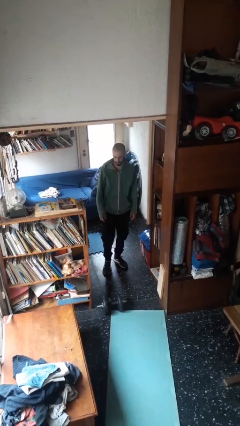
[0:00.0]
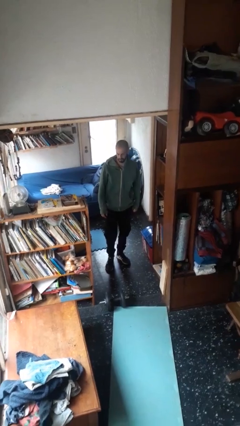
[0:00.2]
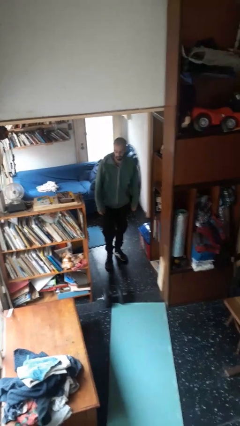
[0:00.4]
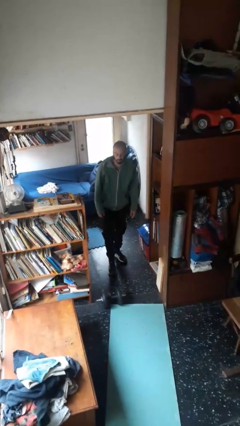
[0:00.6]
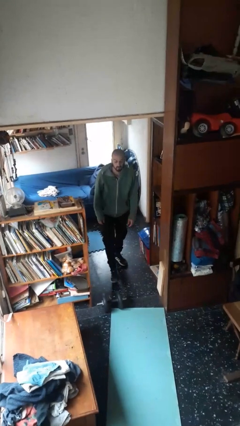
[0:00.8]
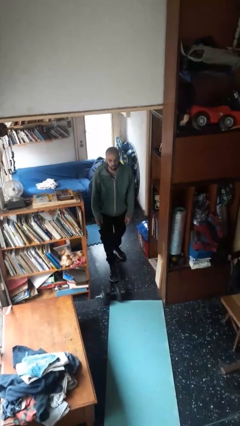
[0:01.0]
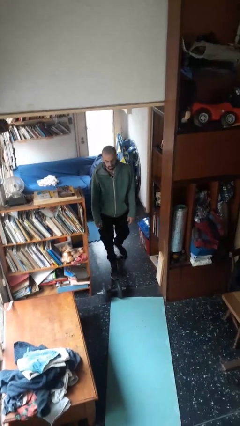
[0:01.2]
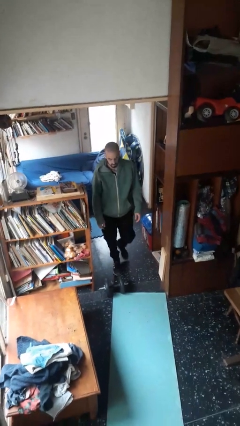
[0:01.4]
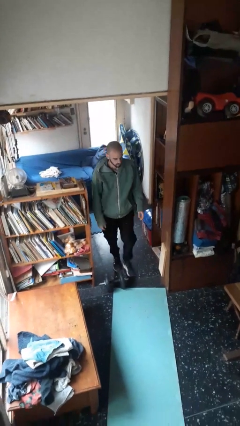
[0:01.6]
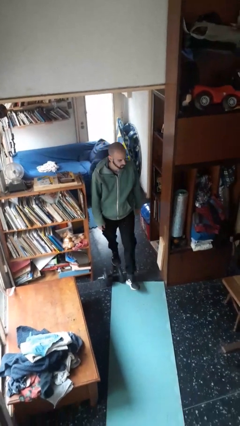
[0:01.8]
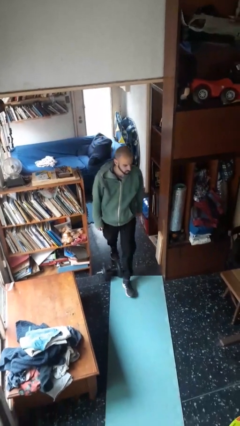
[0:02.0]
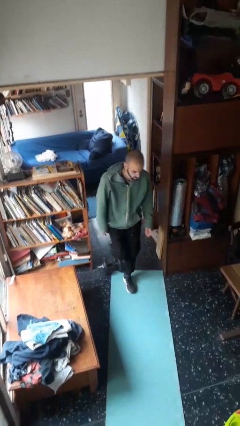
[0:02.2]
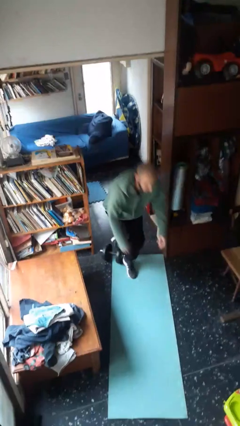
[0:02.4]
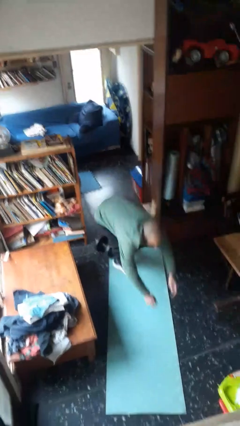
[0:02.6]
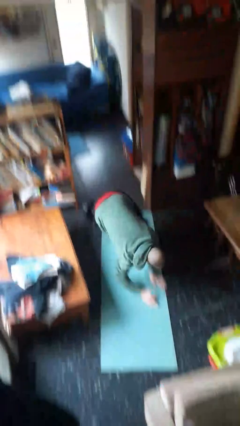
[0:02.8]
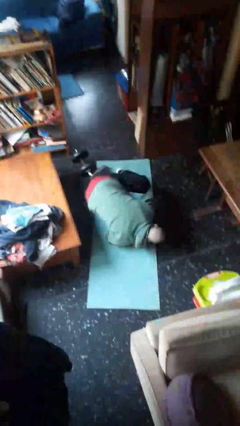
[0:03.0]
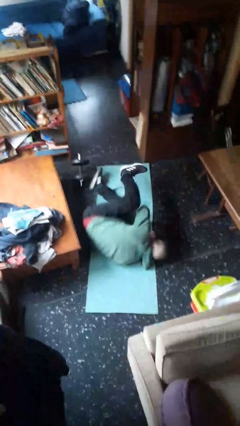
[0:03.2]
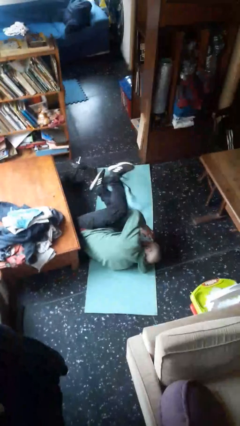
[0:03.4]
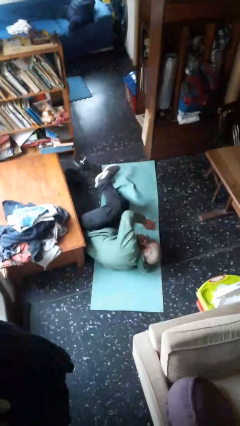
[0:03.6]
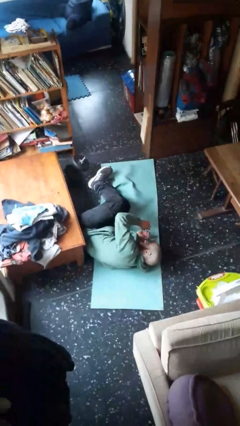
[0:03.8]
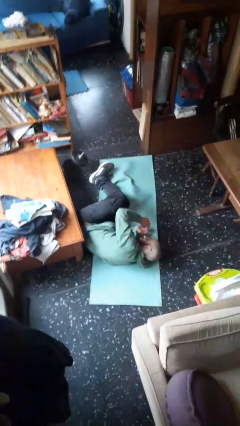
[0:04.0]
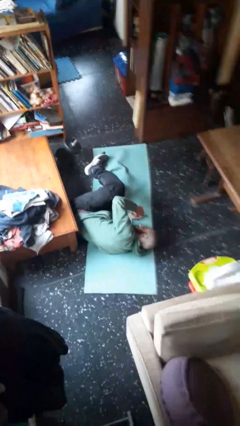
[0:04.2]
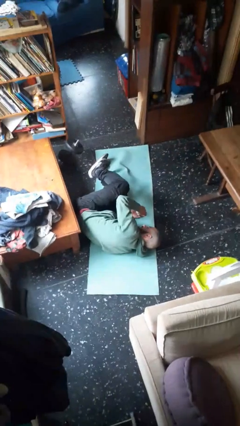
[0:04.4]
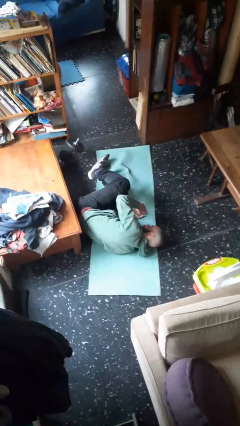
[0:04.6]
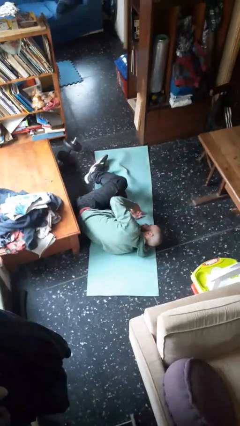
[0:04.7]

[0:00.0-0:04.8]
person trips on object on floor

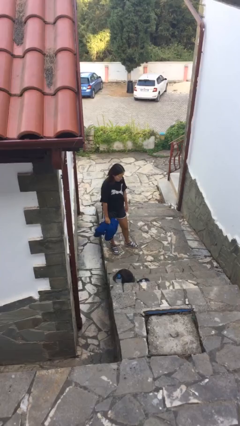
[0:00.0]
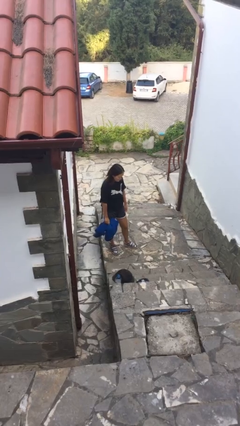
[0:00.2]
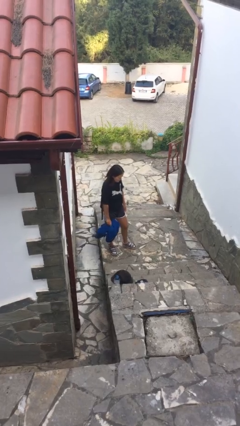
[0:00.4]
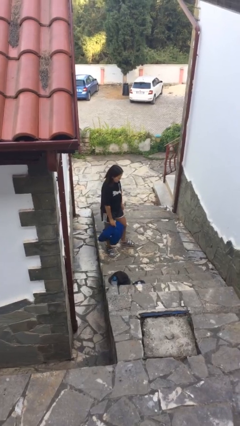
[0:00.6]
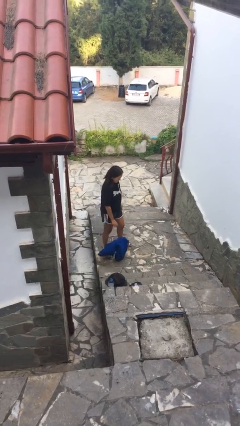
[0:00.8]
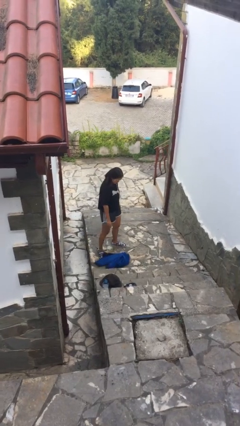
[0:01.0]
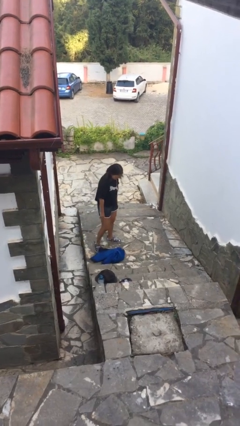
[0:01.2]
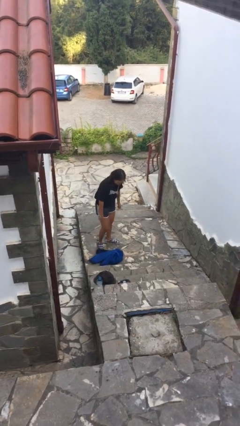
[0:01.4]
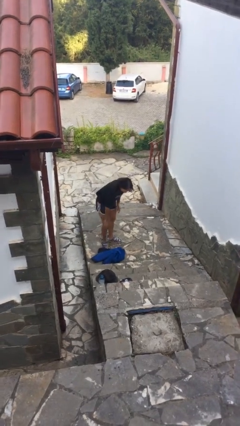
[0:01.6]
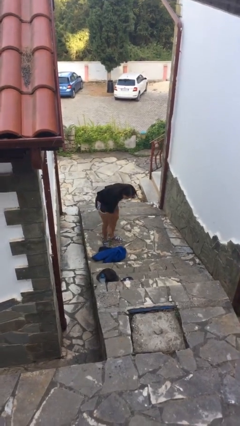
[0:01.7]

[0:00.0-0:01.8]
person drops object

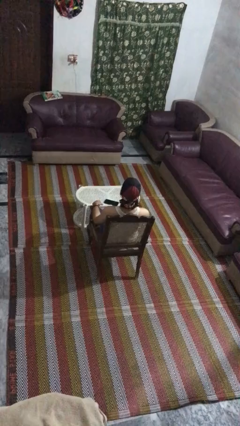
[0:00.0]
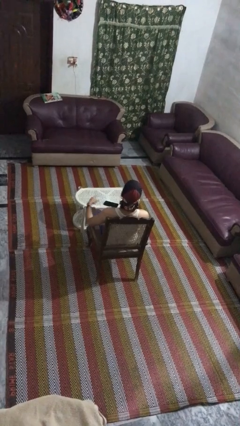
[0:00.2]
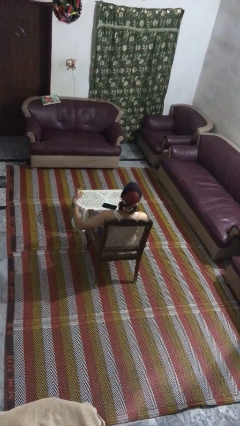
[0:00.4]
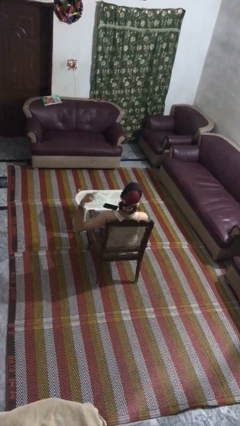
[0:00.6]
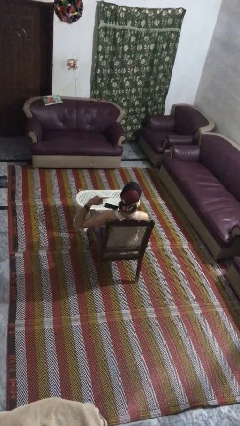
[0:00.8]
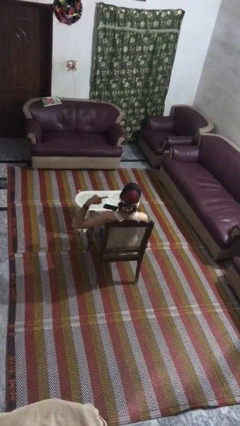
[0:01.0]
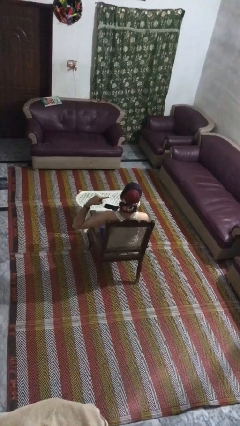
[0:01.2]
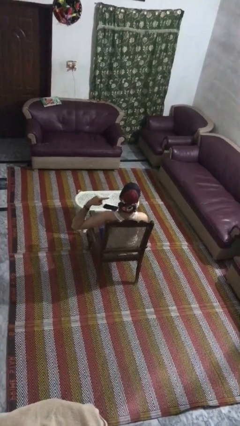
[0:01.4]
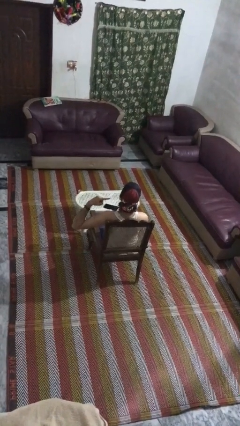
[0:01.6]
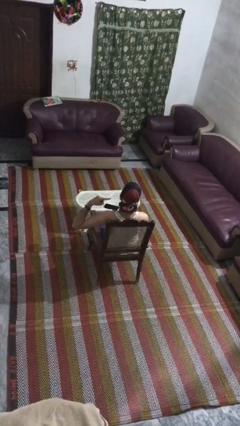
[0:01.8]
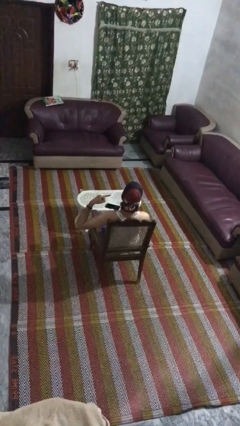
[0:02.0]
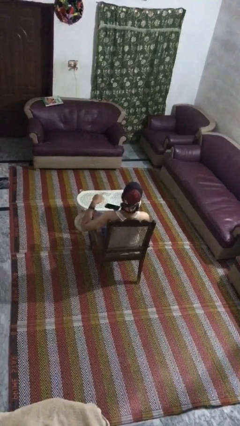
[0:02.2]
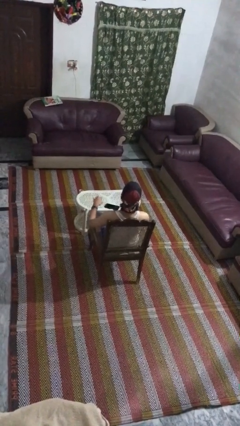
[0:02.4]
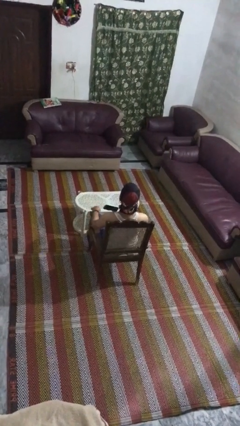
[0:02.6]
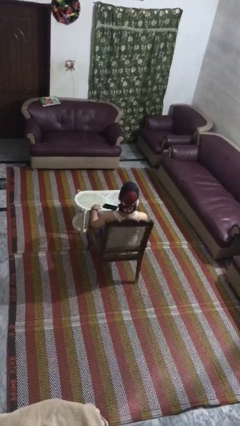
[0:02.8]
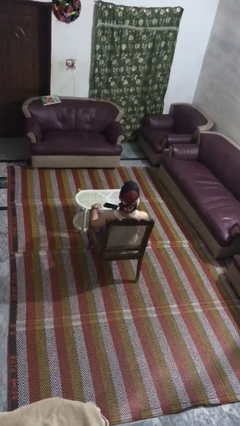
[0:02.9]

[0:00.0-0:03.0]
person gestures listen closely

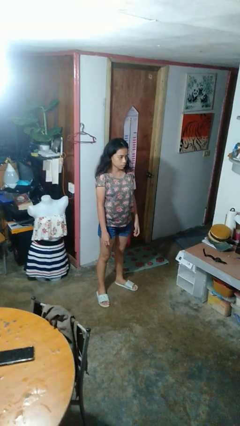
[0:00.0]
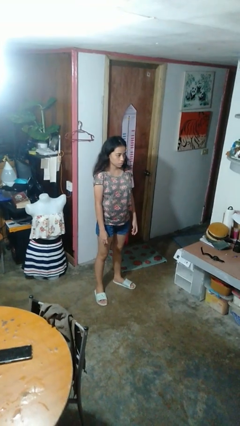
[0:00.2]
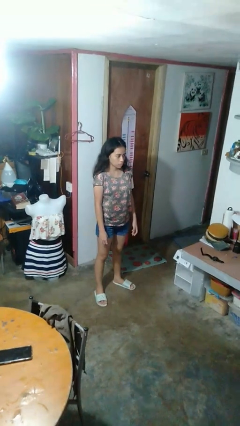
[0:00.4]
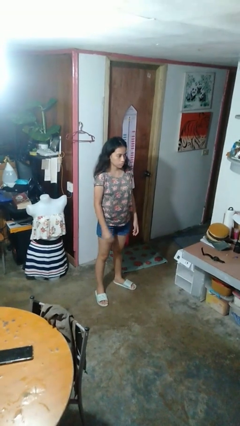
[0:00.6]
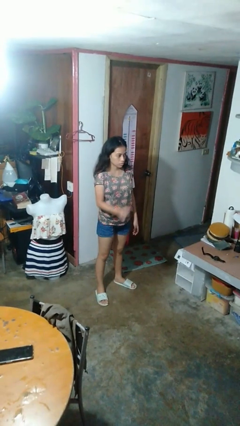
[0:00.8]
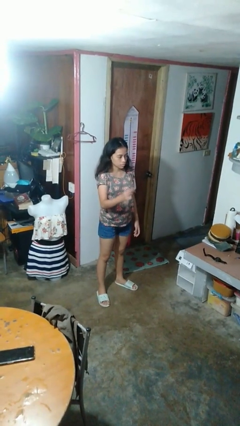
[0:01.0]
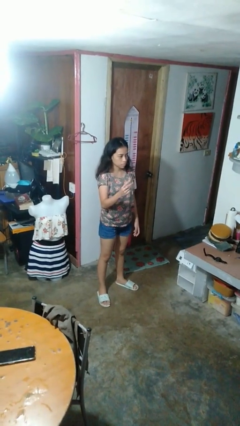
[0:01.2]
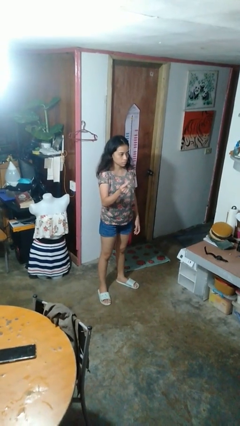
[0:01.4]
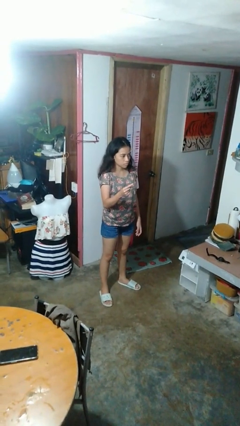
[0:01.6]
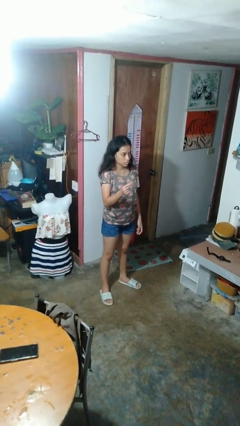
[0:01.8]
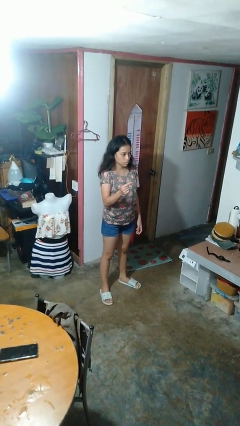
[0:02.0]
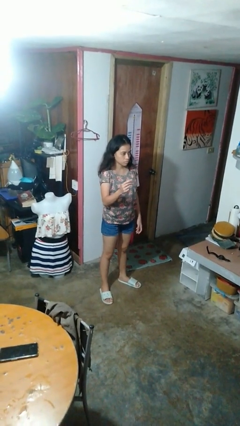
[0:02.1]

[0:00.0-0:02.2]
person snaps fingers

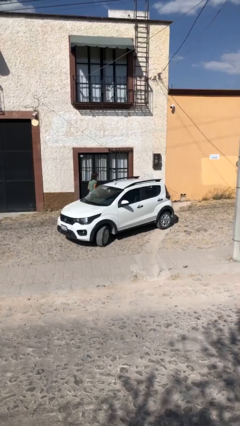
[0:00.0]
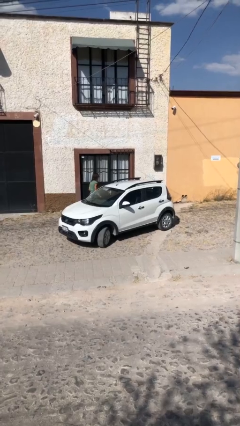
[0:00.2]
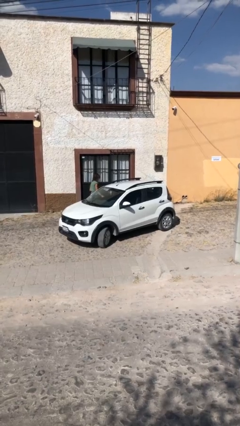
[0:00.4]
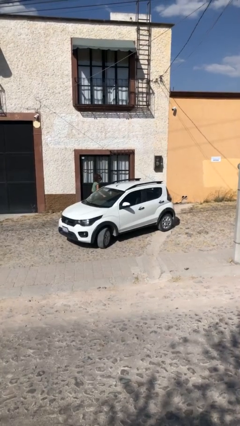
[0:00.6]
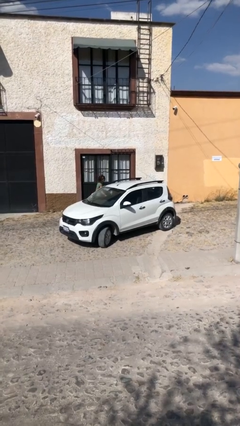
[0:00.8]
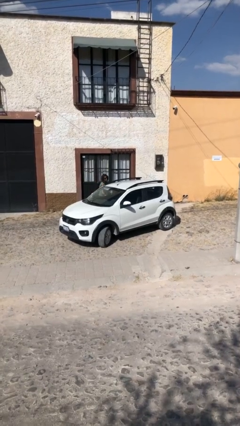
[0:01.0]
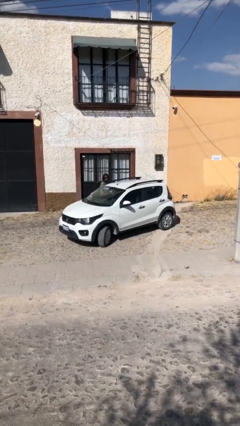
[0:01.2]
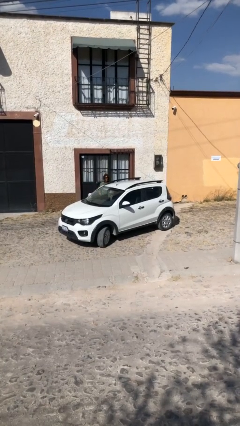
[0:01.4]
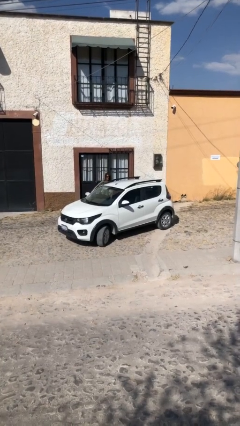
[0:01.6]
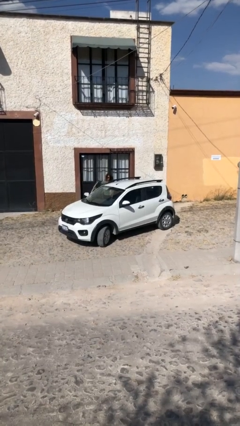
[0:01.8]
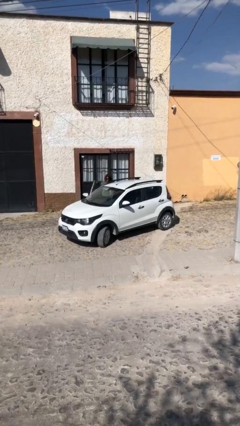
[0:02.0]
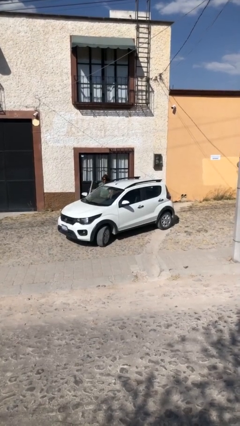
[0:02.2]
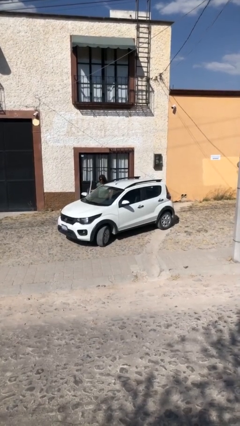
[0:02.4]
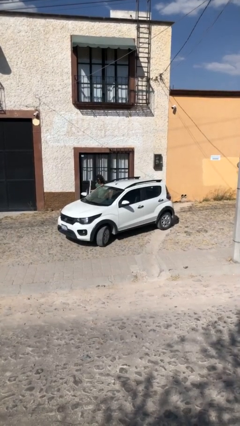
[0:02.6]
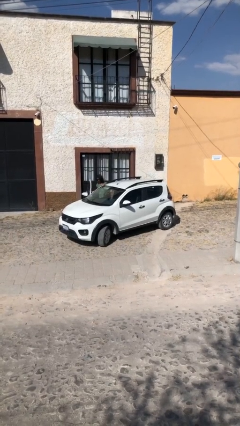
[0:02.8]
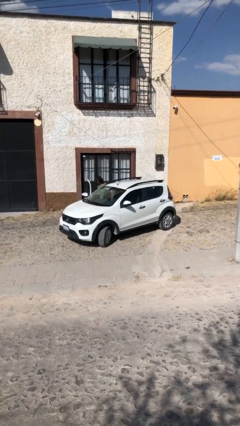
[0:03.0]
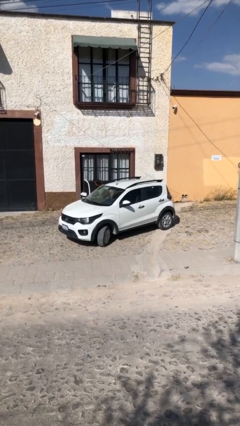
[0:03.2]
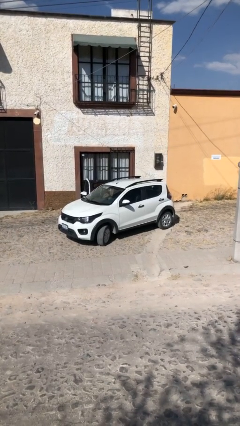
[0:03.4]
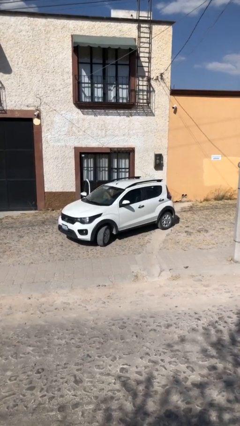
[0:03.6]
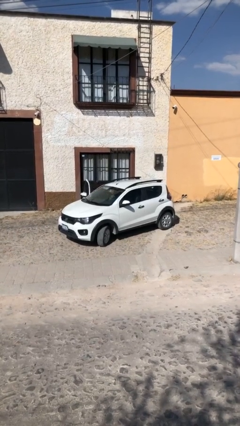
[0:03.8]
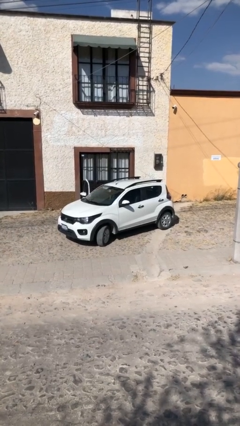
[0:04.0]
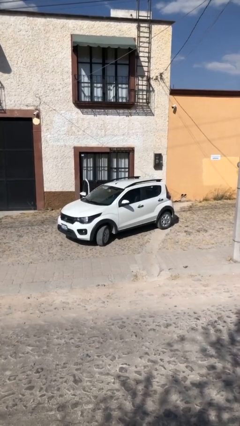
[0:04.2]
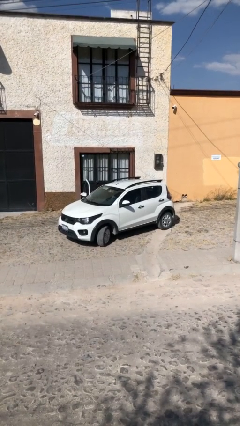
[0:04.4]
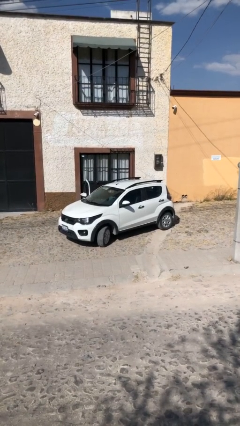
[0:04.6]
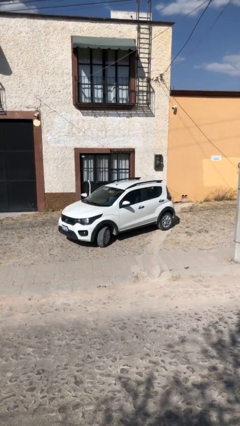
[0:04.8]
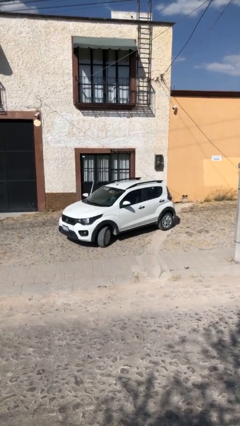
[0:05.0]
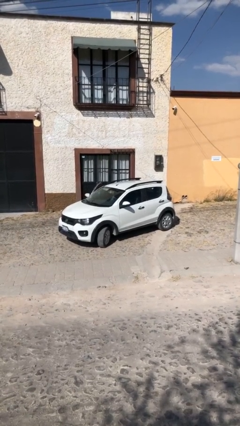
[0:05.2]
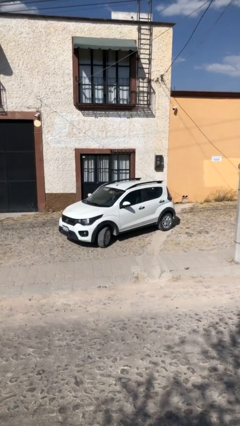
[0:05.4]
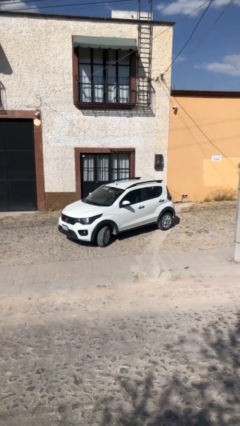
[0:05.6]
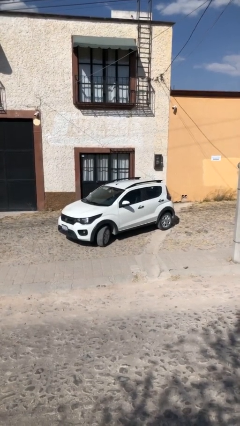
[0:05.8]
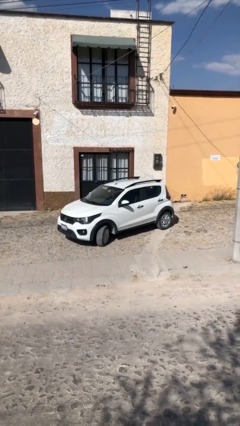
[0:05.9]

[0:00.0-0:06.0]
car picks up person
